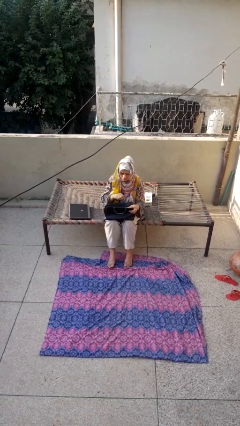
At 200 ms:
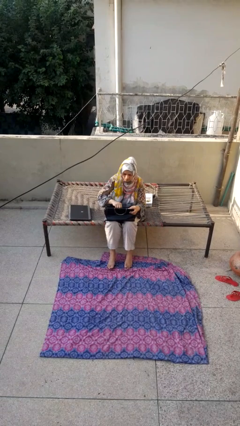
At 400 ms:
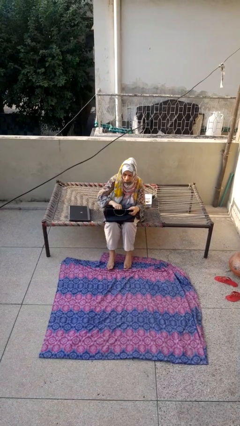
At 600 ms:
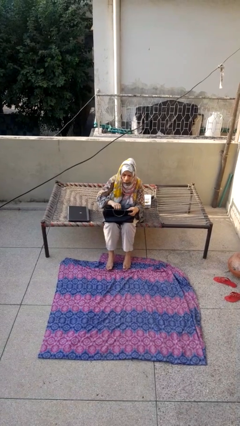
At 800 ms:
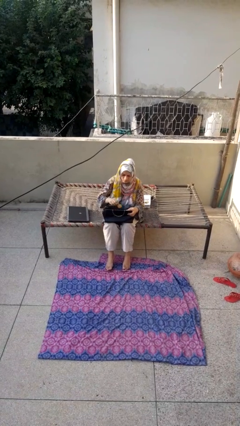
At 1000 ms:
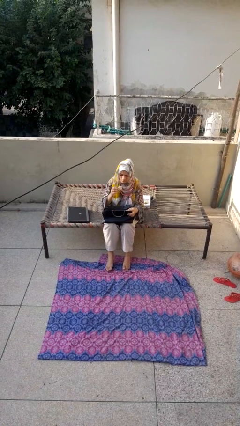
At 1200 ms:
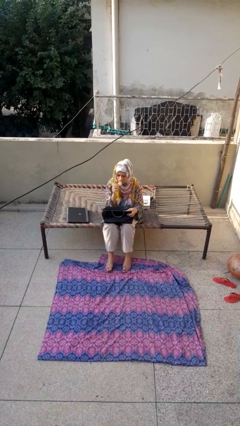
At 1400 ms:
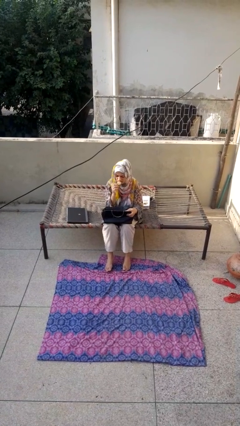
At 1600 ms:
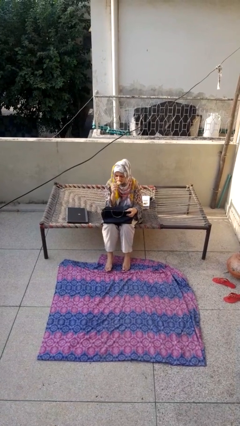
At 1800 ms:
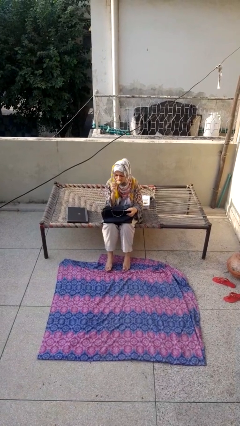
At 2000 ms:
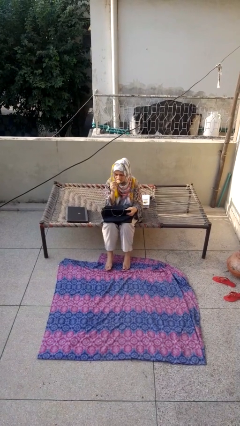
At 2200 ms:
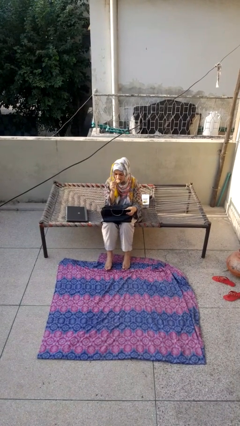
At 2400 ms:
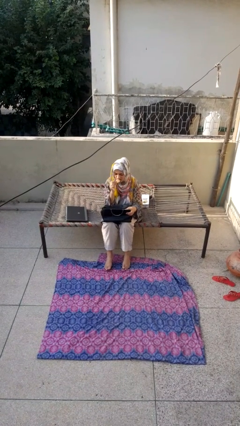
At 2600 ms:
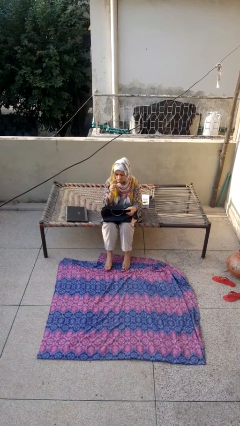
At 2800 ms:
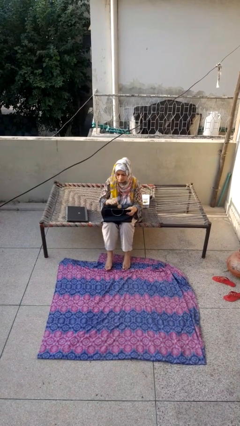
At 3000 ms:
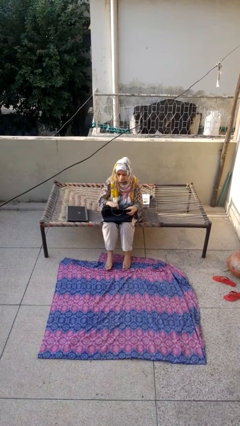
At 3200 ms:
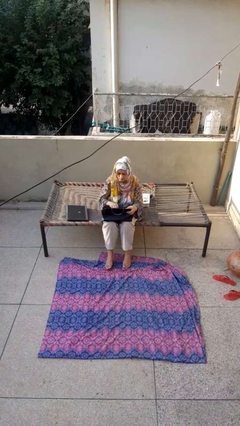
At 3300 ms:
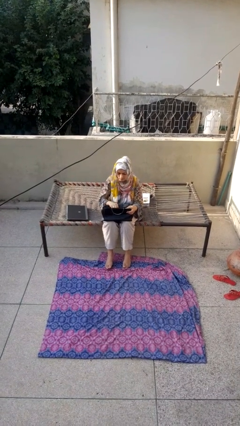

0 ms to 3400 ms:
person eats snack from bag

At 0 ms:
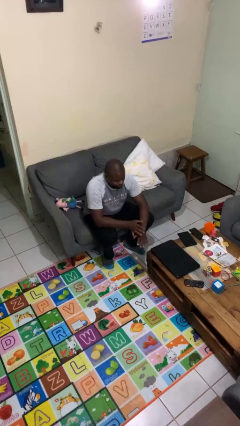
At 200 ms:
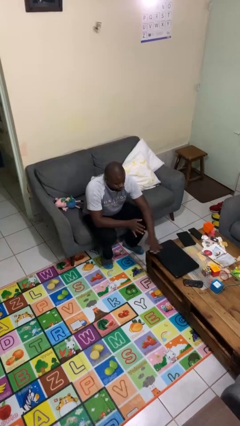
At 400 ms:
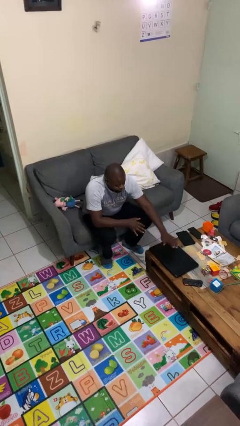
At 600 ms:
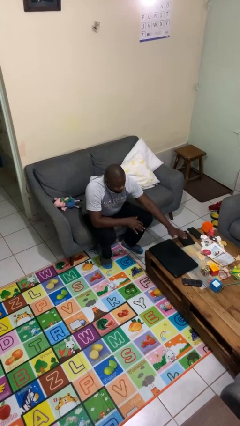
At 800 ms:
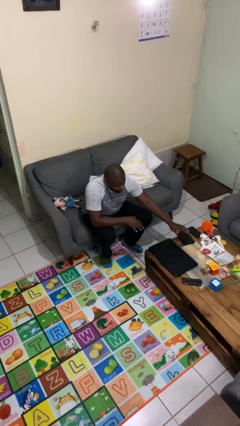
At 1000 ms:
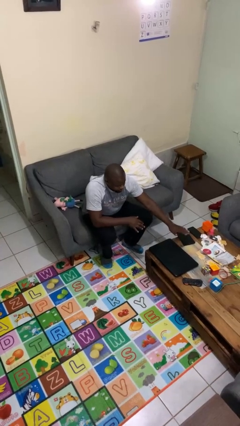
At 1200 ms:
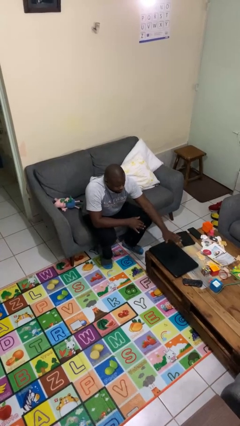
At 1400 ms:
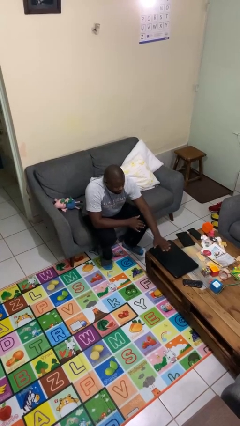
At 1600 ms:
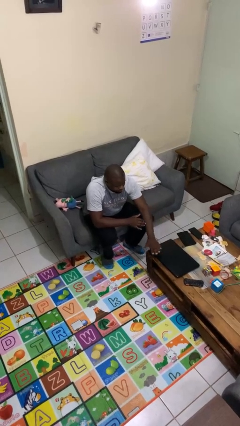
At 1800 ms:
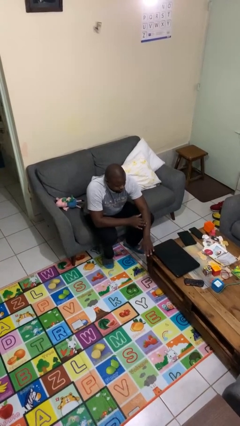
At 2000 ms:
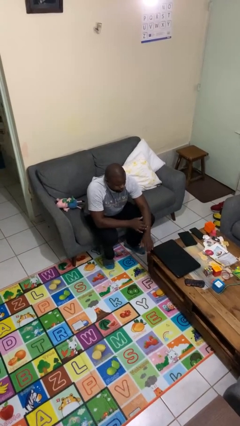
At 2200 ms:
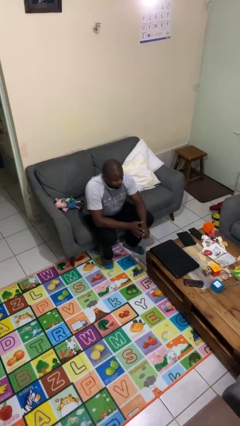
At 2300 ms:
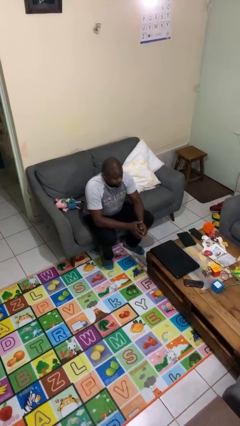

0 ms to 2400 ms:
person waves hand over object

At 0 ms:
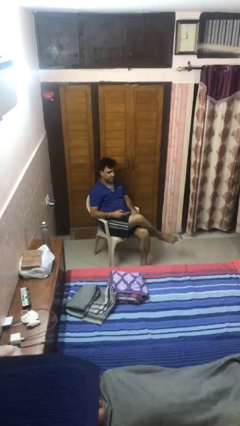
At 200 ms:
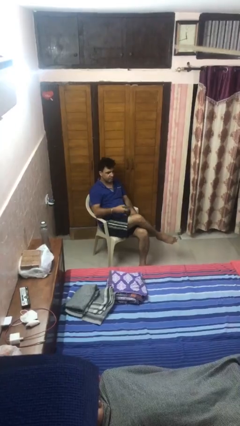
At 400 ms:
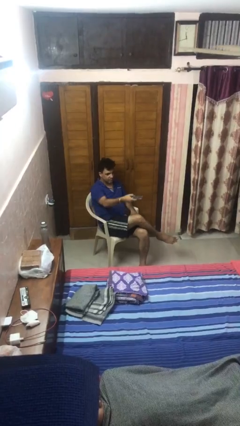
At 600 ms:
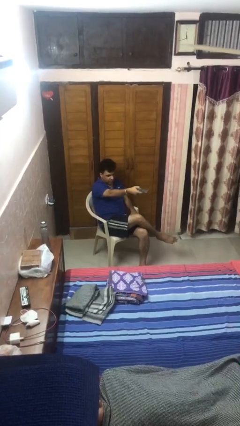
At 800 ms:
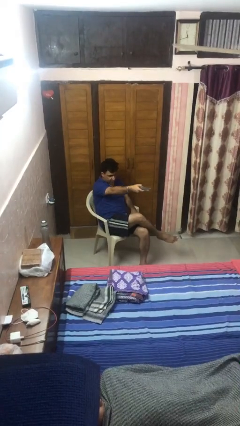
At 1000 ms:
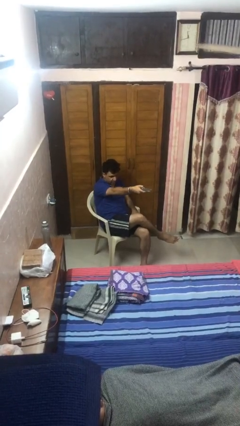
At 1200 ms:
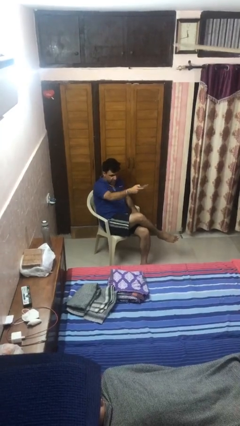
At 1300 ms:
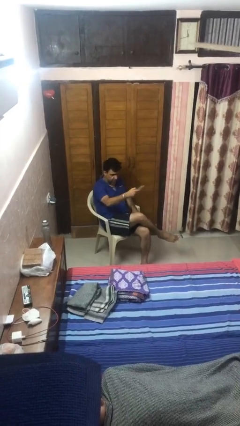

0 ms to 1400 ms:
person uses television remote

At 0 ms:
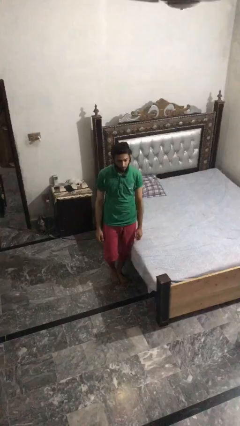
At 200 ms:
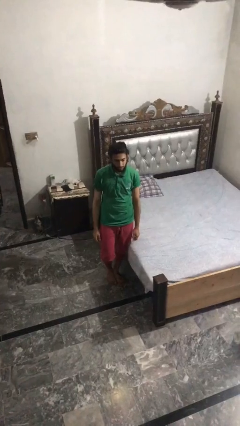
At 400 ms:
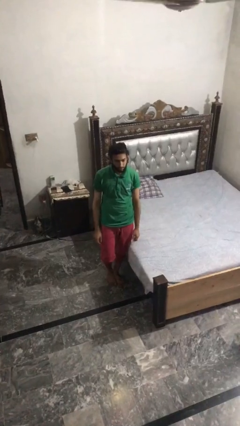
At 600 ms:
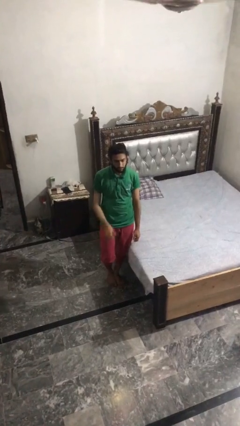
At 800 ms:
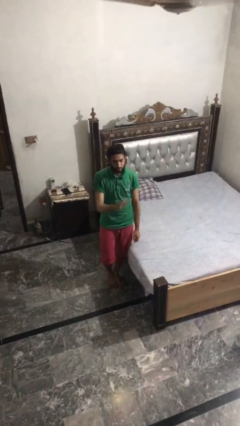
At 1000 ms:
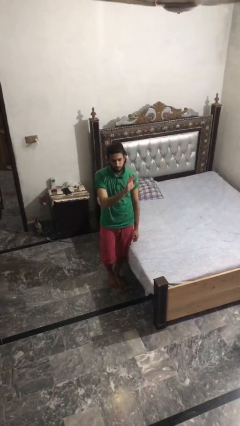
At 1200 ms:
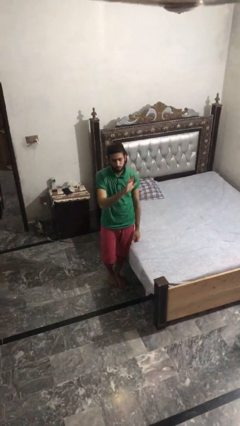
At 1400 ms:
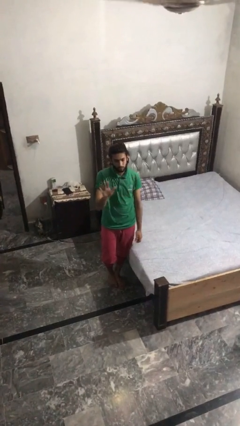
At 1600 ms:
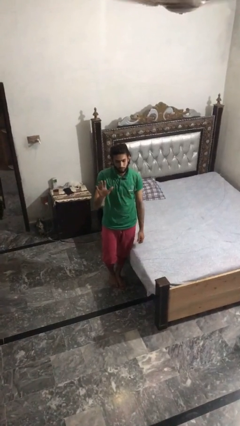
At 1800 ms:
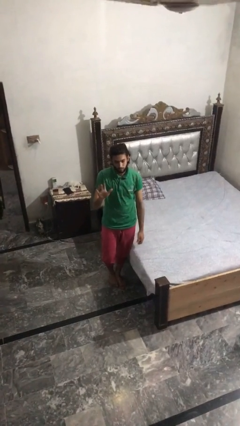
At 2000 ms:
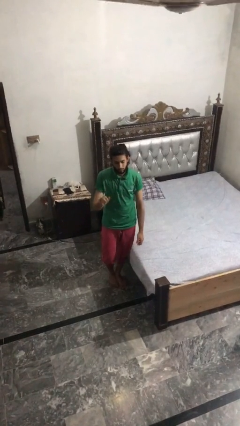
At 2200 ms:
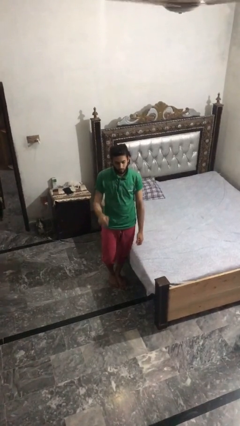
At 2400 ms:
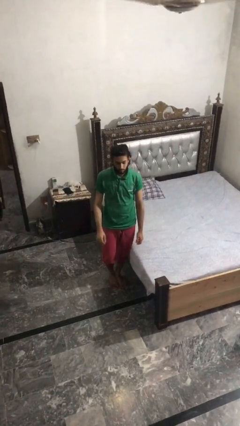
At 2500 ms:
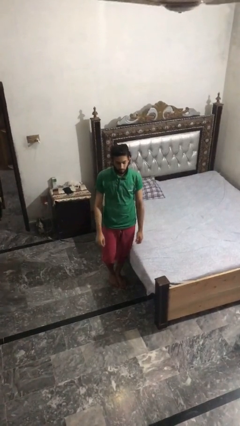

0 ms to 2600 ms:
person gestures swipe right

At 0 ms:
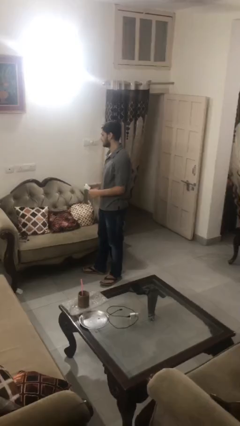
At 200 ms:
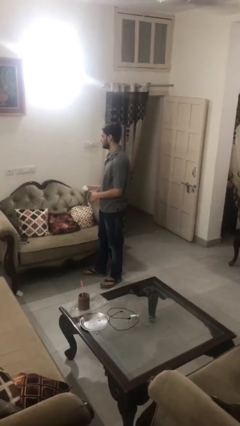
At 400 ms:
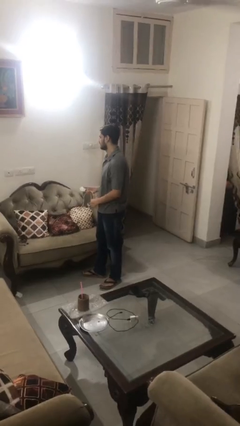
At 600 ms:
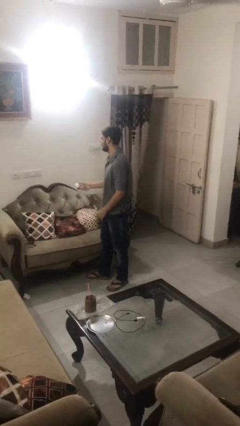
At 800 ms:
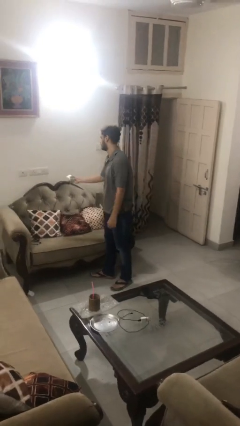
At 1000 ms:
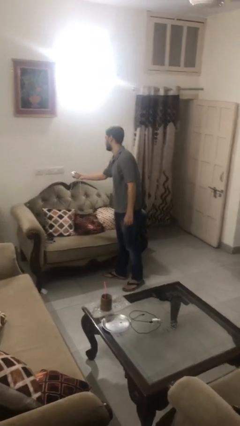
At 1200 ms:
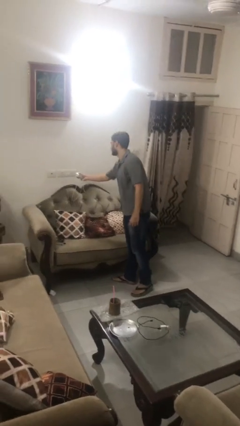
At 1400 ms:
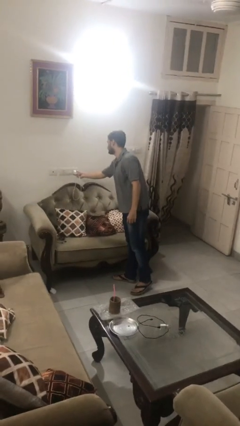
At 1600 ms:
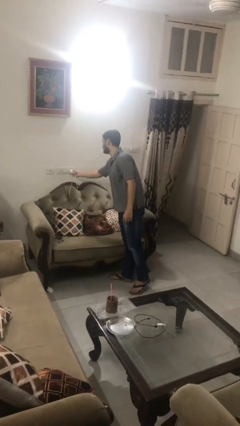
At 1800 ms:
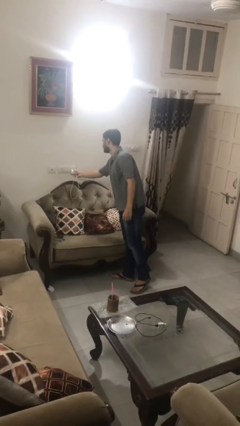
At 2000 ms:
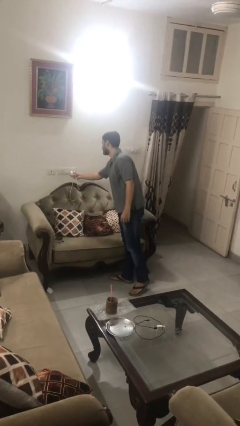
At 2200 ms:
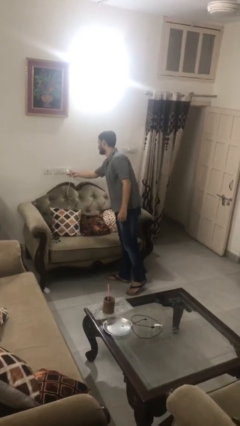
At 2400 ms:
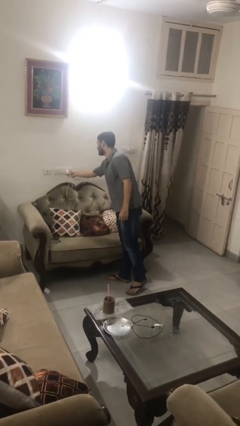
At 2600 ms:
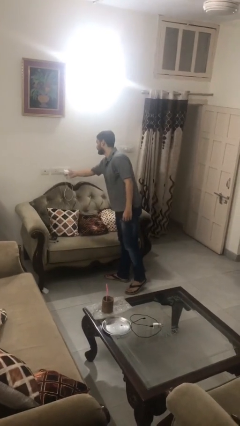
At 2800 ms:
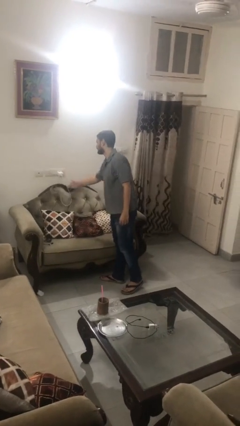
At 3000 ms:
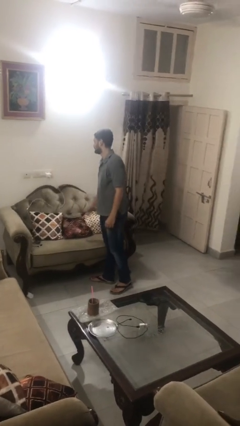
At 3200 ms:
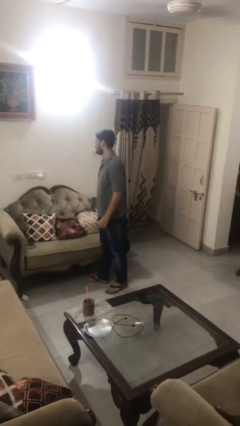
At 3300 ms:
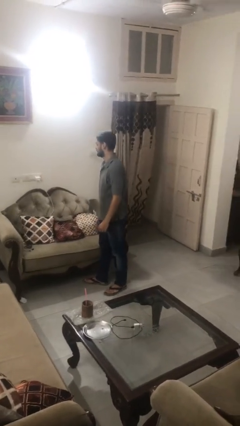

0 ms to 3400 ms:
person plugs into electrical socket

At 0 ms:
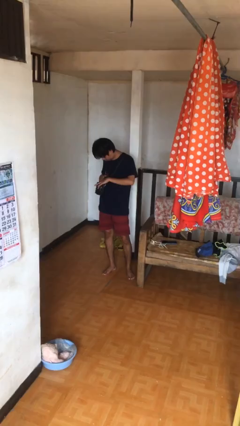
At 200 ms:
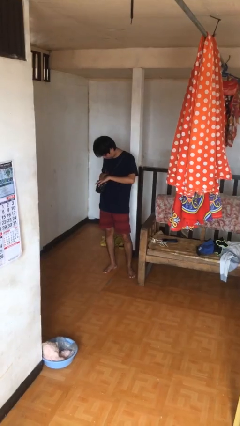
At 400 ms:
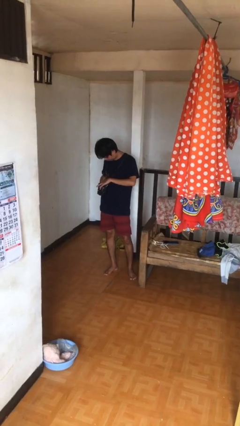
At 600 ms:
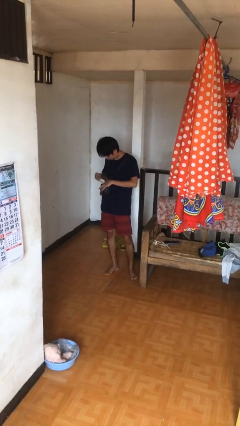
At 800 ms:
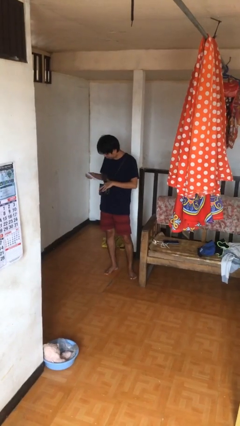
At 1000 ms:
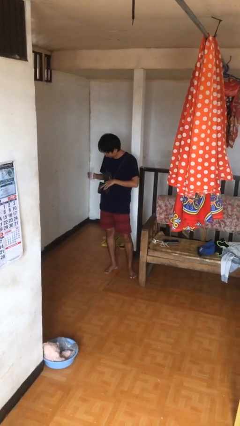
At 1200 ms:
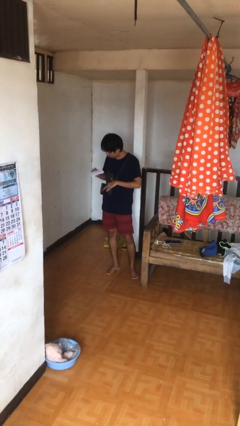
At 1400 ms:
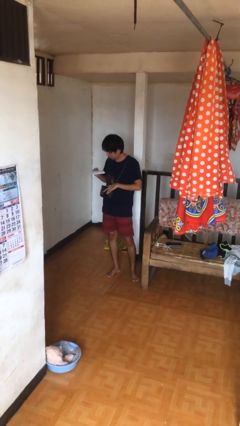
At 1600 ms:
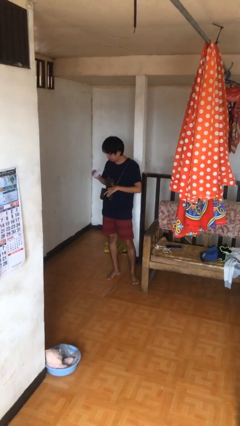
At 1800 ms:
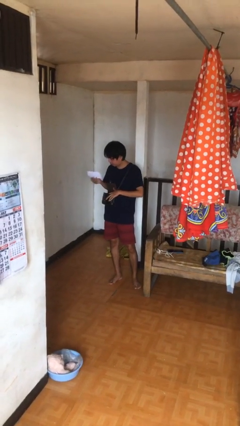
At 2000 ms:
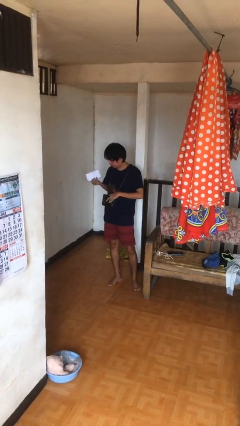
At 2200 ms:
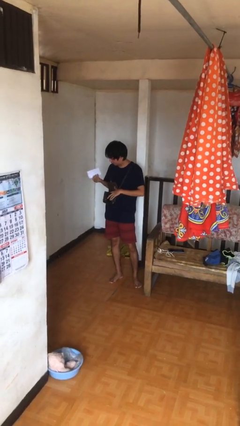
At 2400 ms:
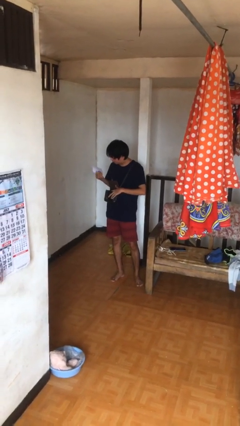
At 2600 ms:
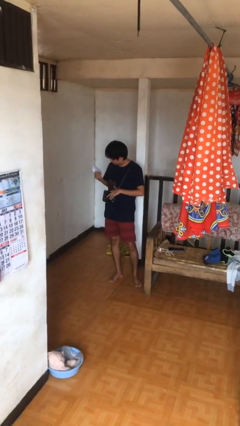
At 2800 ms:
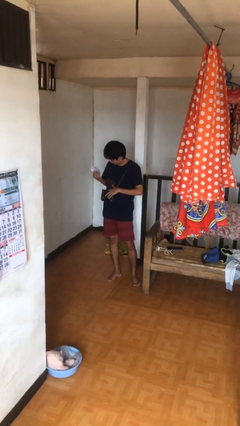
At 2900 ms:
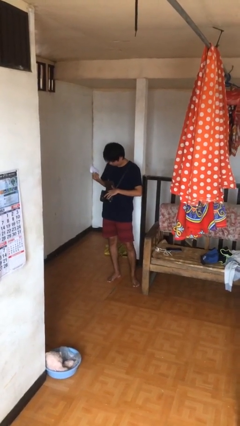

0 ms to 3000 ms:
person takes object from purse

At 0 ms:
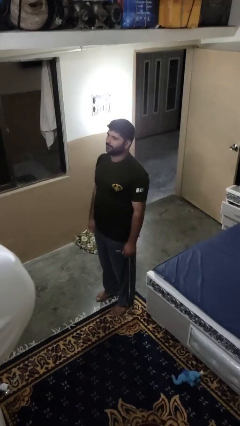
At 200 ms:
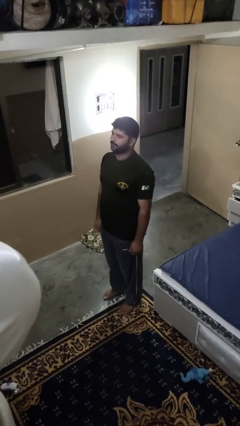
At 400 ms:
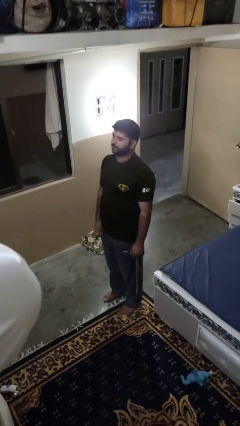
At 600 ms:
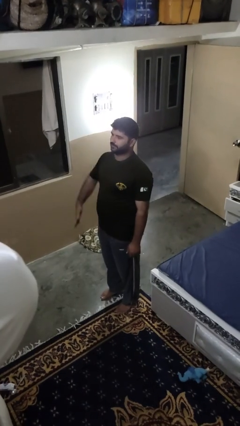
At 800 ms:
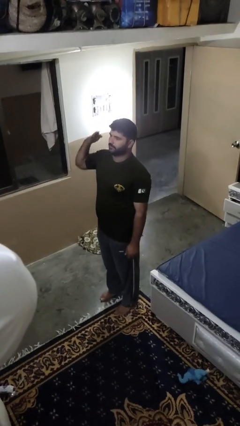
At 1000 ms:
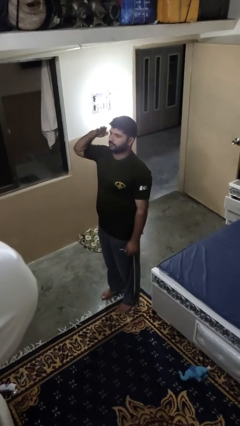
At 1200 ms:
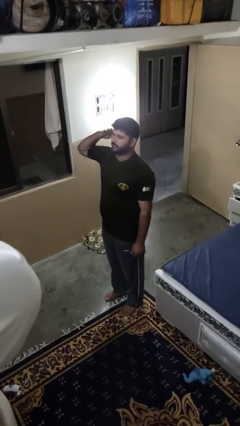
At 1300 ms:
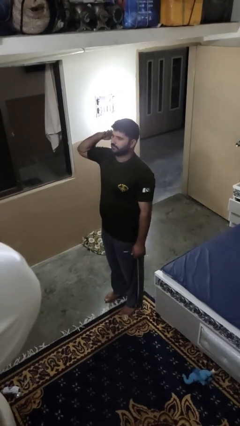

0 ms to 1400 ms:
person salutes
